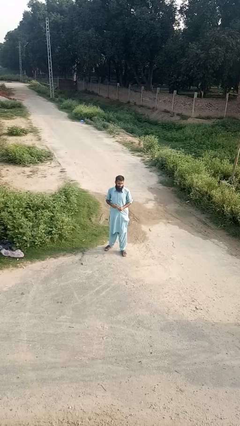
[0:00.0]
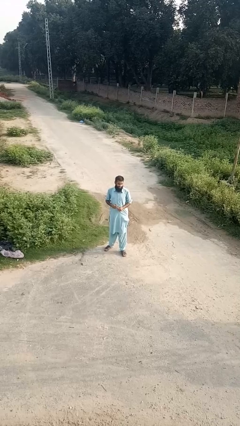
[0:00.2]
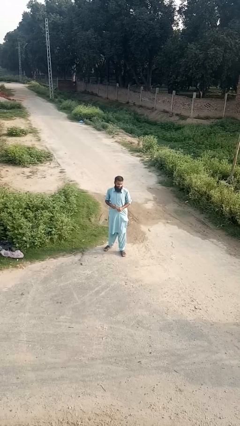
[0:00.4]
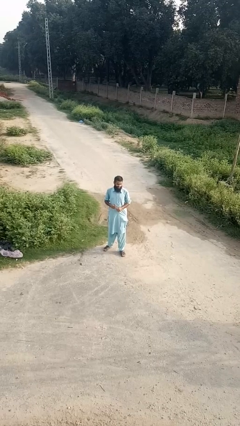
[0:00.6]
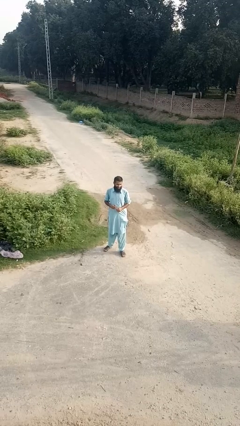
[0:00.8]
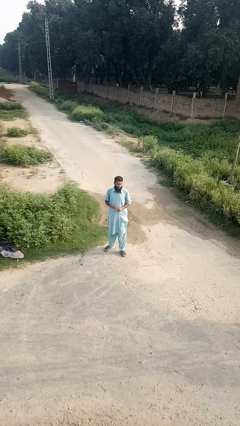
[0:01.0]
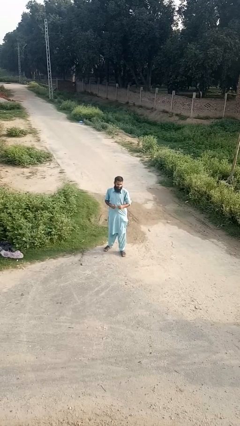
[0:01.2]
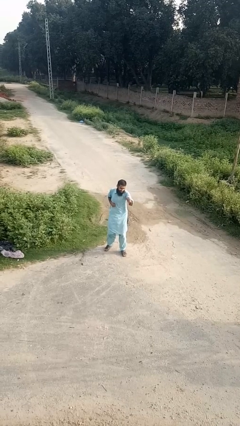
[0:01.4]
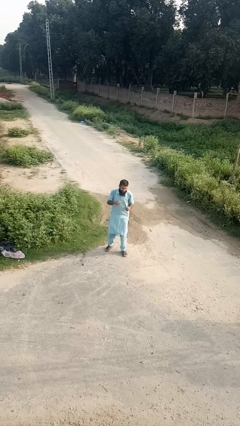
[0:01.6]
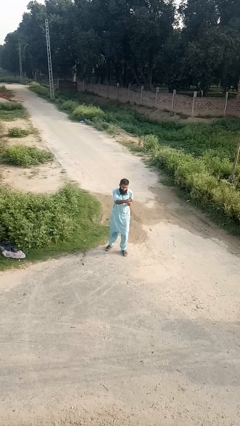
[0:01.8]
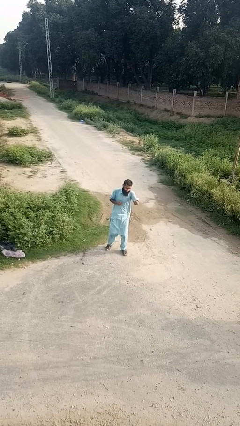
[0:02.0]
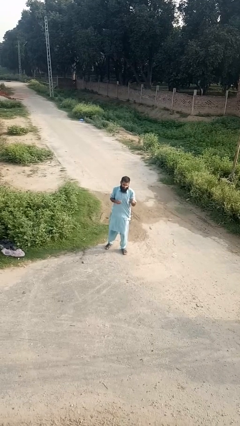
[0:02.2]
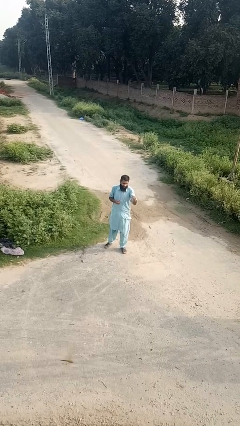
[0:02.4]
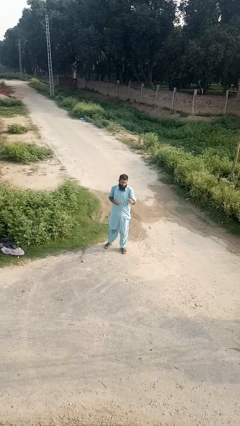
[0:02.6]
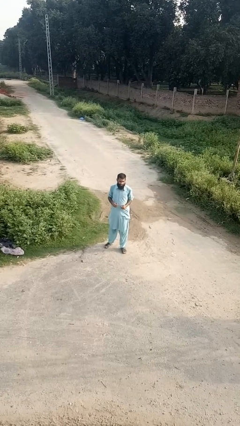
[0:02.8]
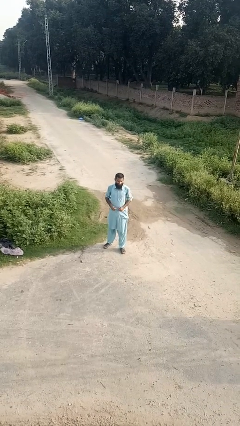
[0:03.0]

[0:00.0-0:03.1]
person punches

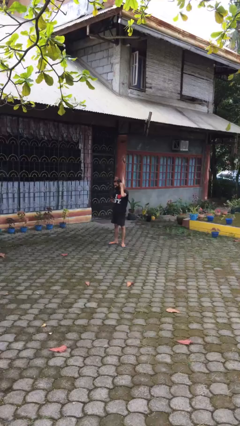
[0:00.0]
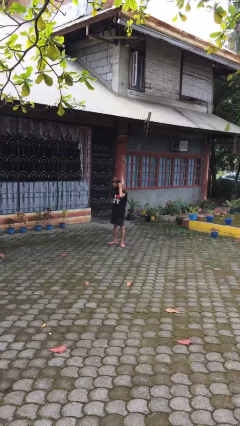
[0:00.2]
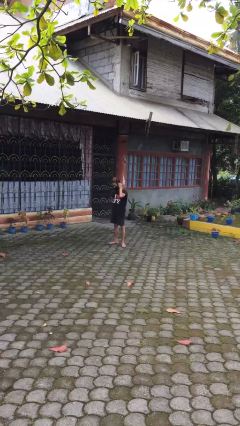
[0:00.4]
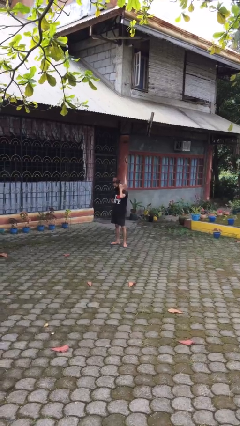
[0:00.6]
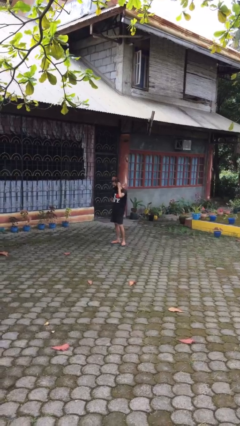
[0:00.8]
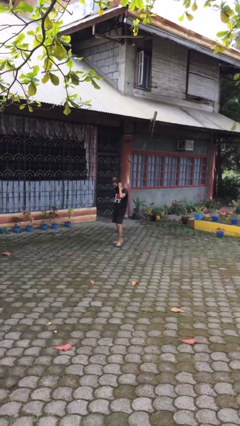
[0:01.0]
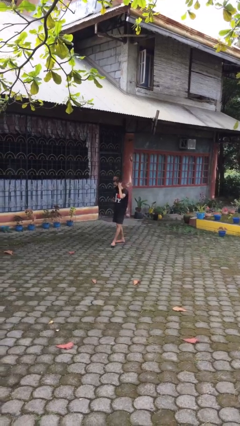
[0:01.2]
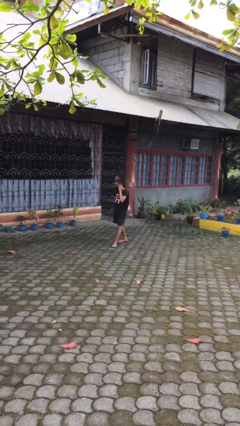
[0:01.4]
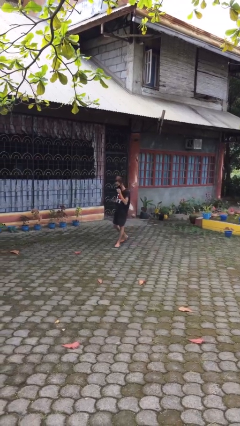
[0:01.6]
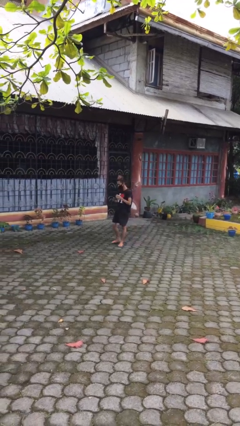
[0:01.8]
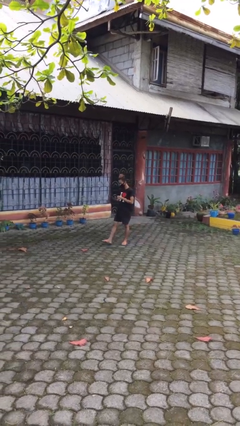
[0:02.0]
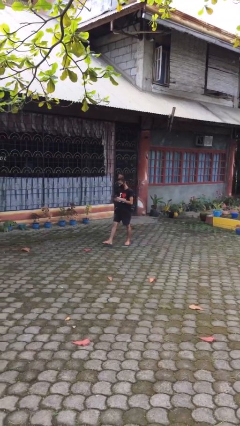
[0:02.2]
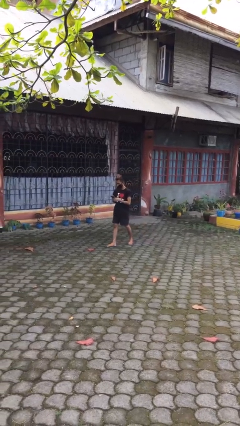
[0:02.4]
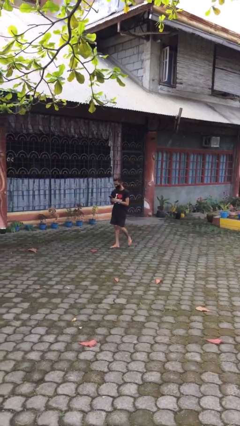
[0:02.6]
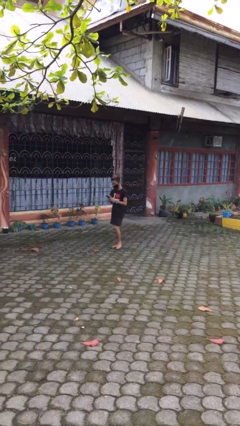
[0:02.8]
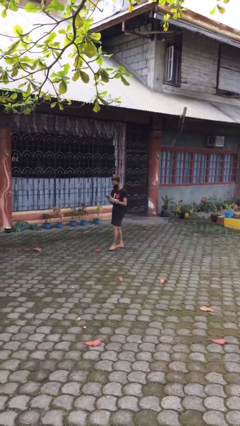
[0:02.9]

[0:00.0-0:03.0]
person texts on phone

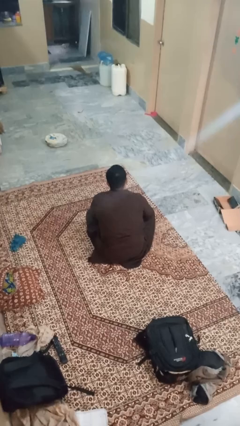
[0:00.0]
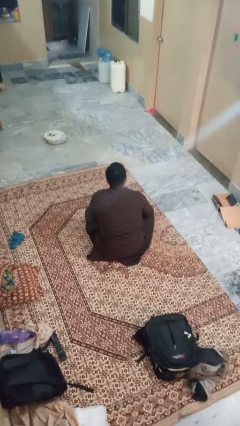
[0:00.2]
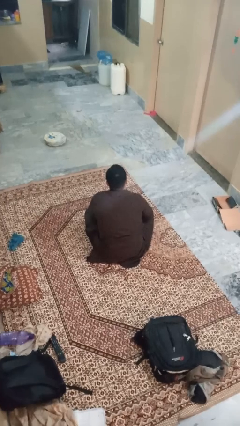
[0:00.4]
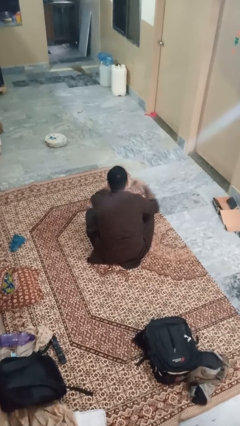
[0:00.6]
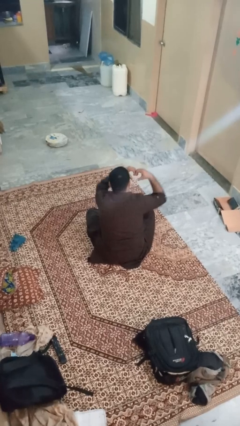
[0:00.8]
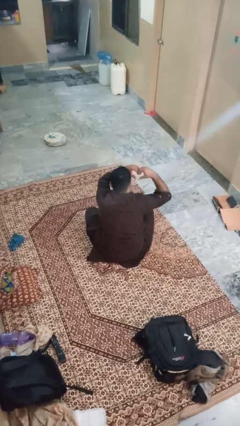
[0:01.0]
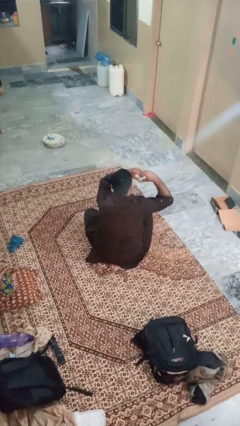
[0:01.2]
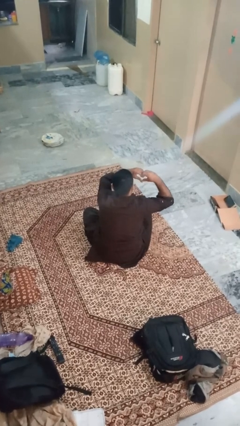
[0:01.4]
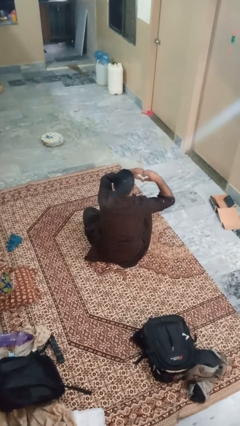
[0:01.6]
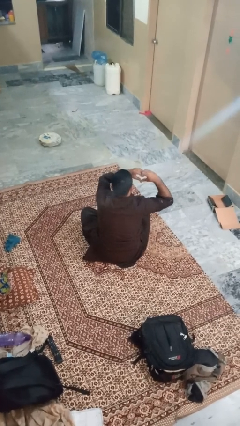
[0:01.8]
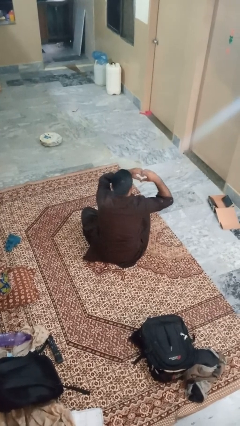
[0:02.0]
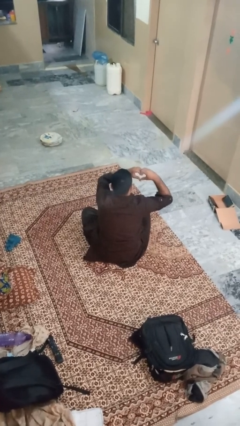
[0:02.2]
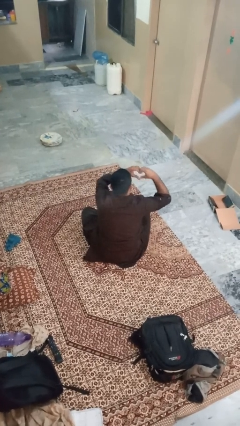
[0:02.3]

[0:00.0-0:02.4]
person gestures heart

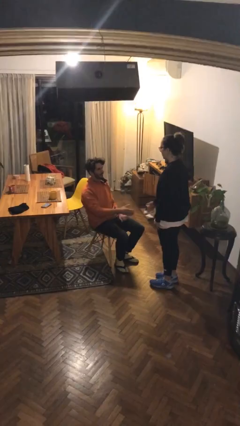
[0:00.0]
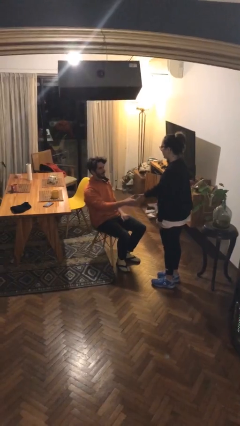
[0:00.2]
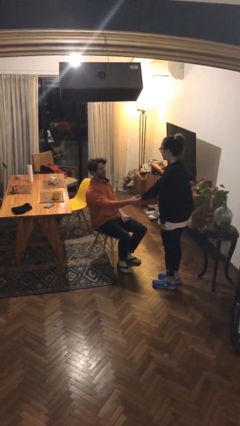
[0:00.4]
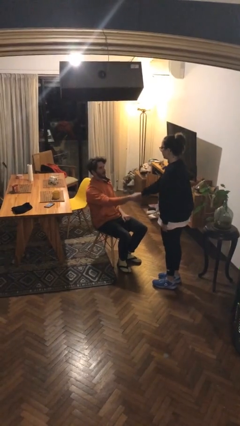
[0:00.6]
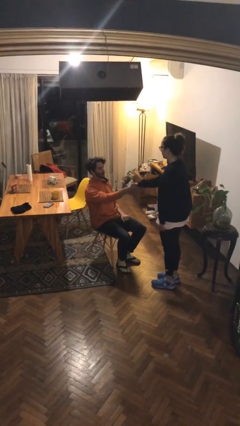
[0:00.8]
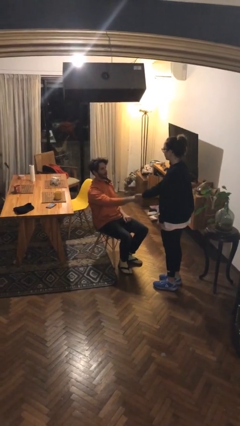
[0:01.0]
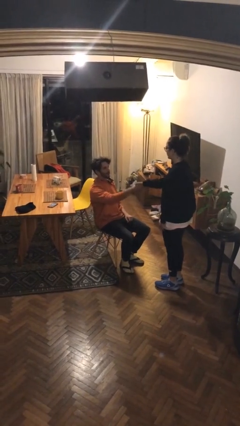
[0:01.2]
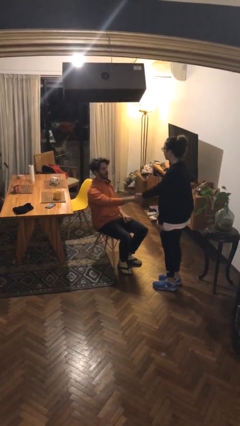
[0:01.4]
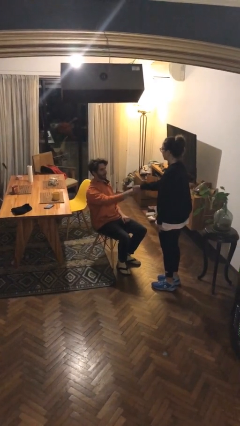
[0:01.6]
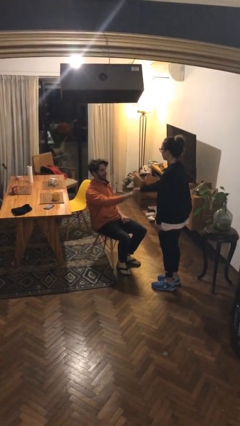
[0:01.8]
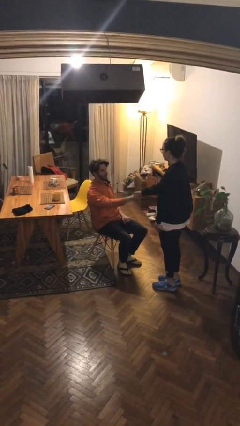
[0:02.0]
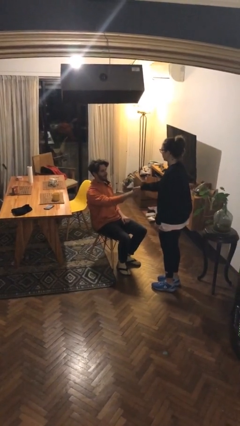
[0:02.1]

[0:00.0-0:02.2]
person shakes hand

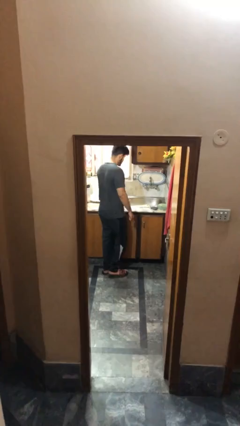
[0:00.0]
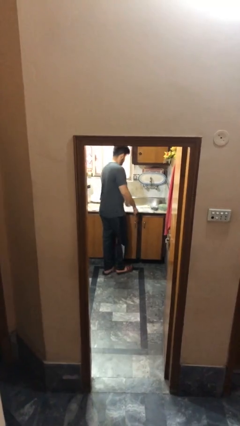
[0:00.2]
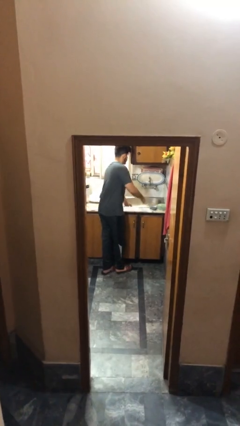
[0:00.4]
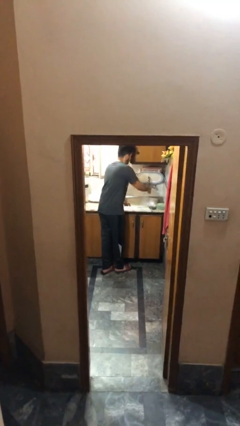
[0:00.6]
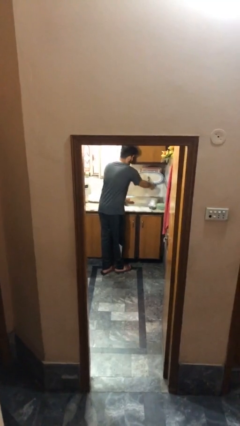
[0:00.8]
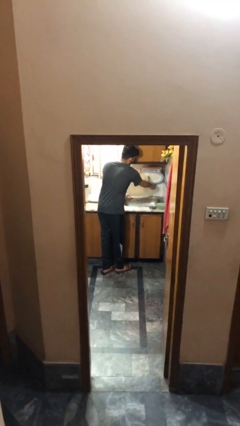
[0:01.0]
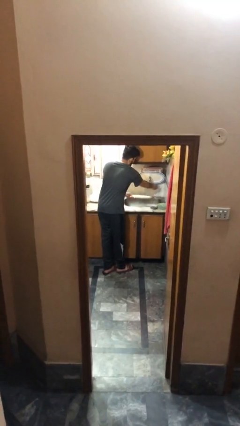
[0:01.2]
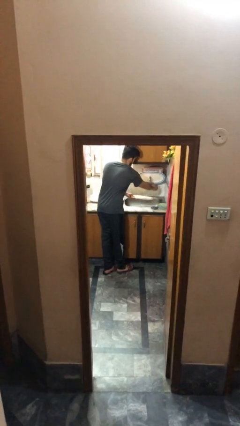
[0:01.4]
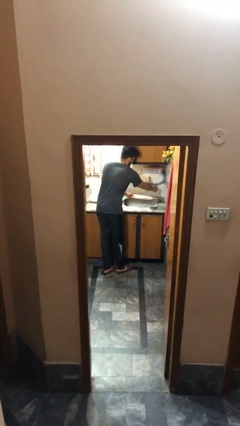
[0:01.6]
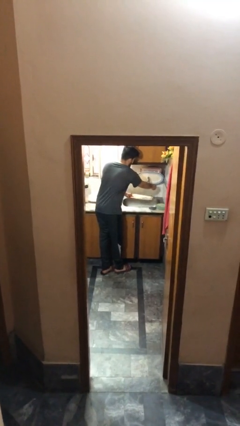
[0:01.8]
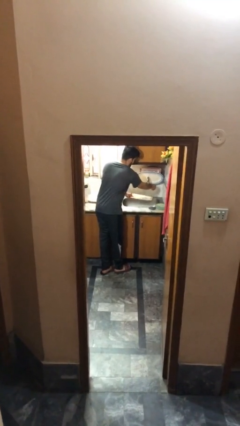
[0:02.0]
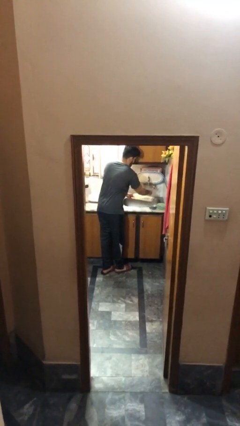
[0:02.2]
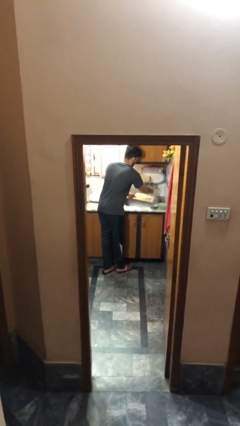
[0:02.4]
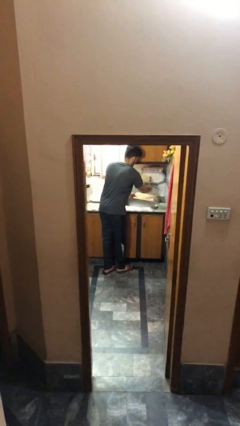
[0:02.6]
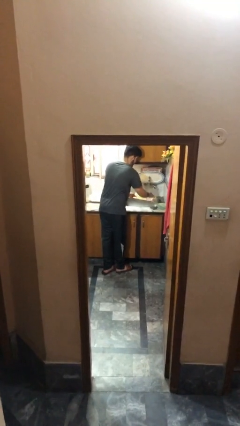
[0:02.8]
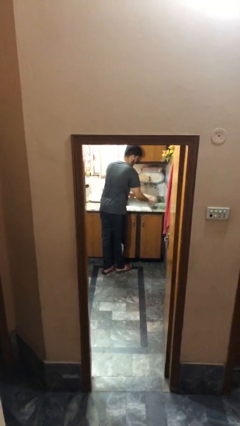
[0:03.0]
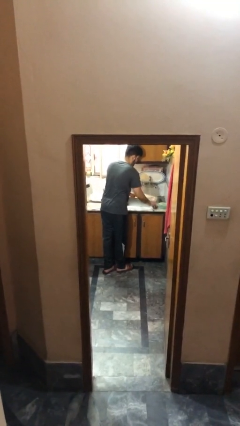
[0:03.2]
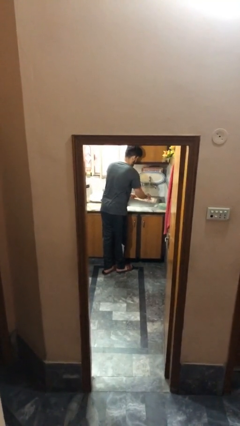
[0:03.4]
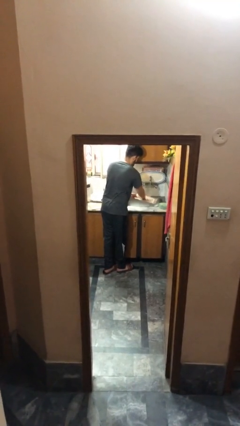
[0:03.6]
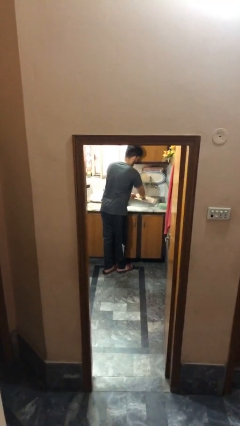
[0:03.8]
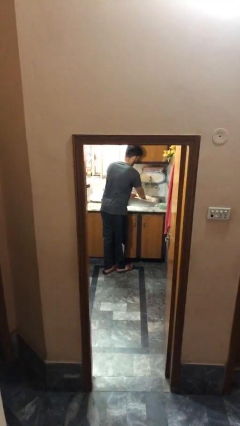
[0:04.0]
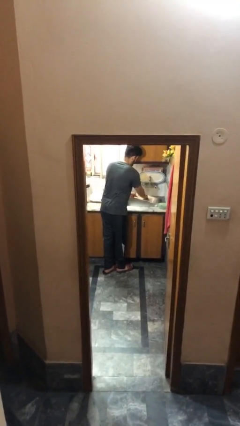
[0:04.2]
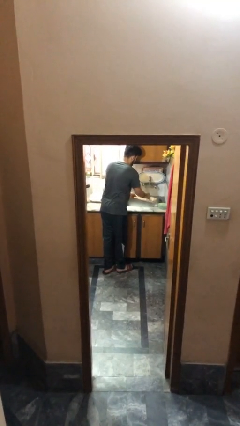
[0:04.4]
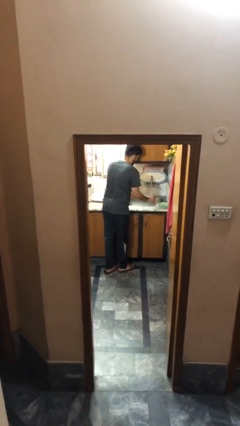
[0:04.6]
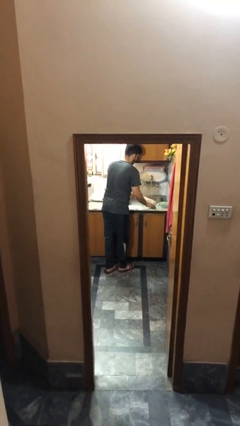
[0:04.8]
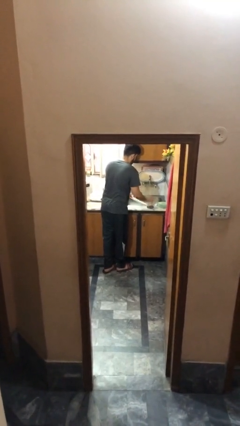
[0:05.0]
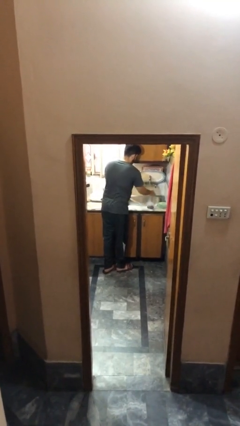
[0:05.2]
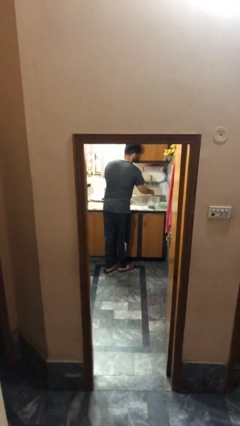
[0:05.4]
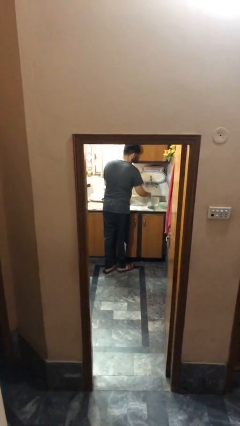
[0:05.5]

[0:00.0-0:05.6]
person washes dish

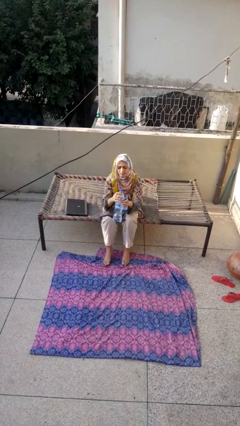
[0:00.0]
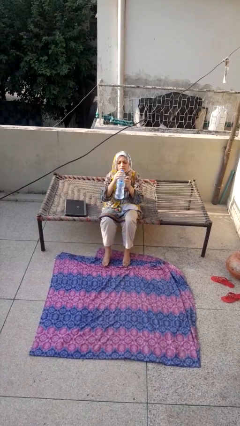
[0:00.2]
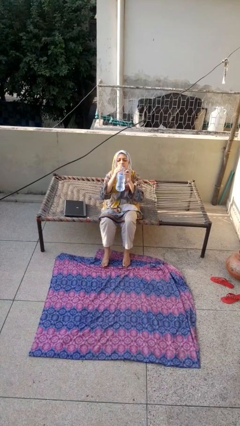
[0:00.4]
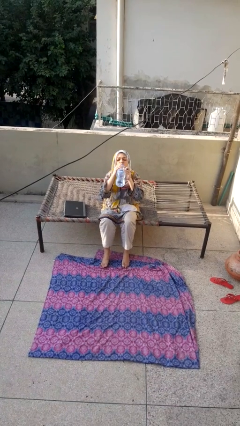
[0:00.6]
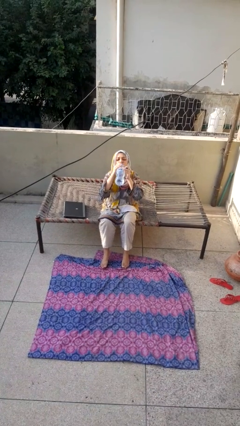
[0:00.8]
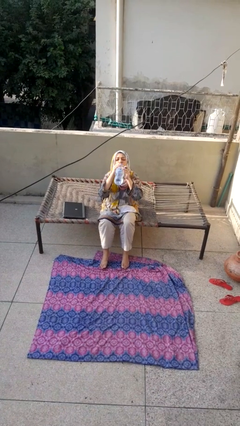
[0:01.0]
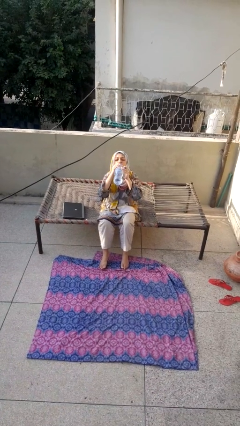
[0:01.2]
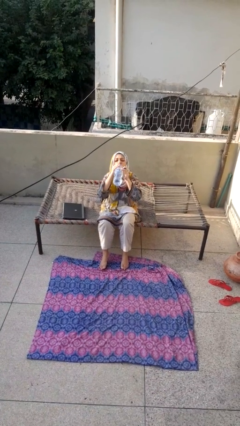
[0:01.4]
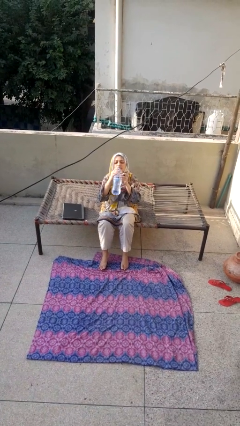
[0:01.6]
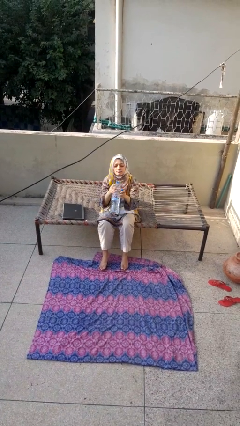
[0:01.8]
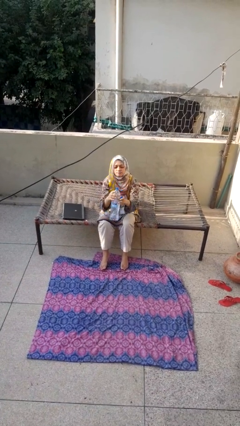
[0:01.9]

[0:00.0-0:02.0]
person drinks from bottle
